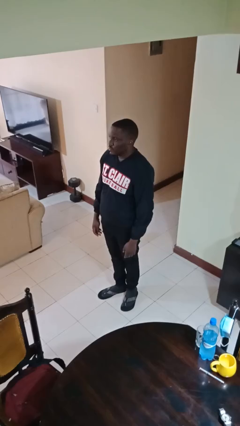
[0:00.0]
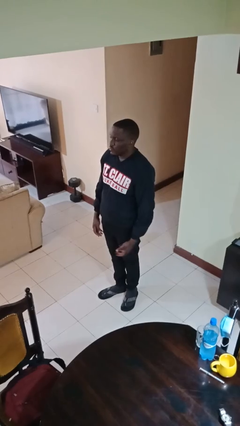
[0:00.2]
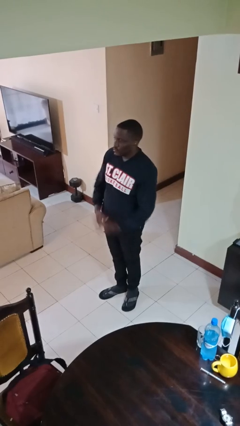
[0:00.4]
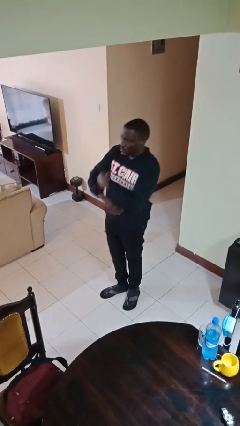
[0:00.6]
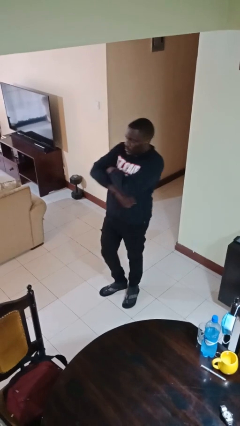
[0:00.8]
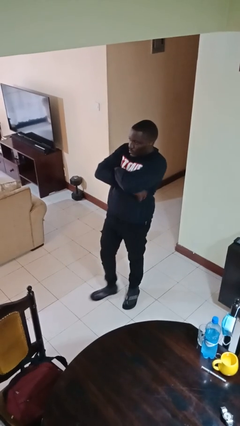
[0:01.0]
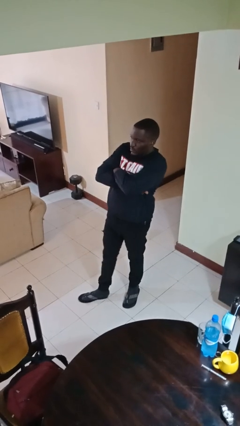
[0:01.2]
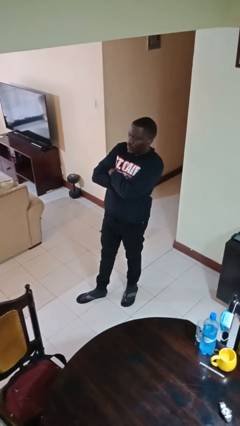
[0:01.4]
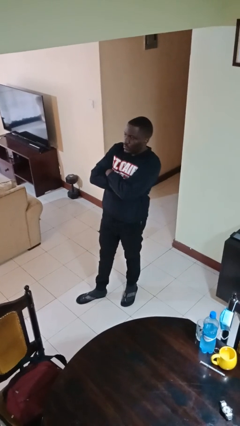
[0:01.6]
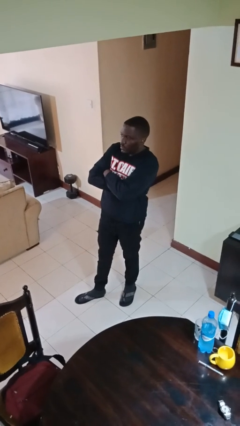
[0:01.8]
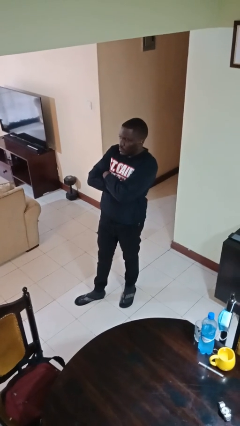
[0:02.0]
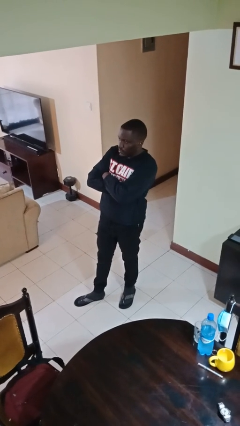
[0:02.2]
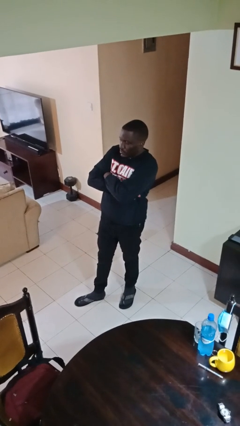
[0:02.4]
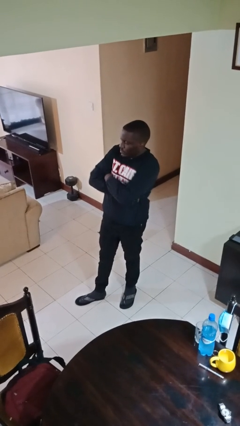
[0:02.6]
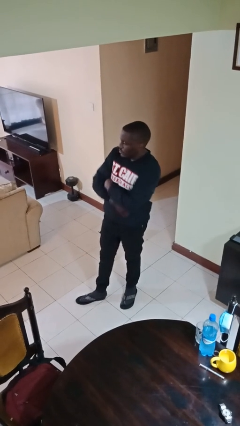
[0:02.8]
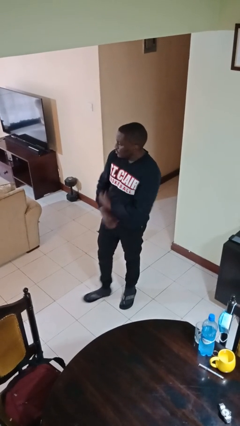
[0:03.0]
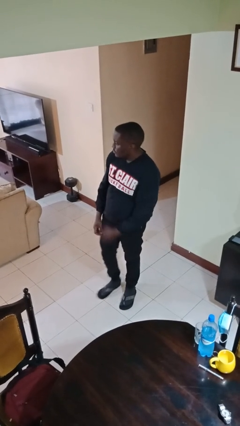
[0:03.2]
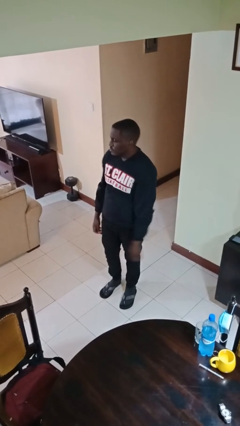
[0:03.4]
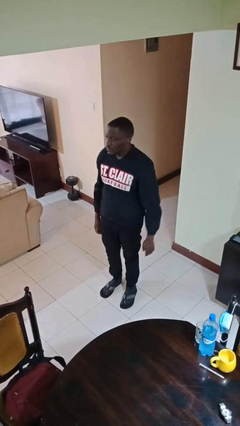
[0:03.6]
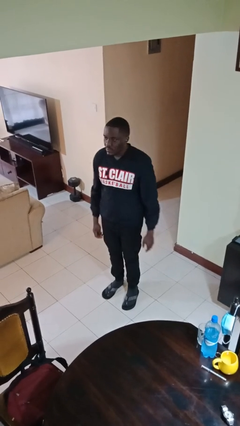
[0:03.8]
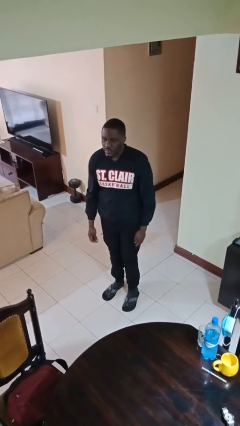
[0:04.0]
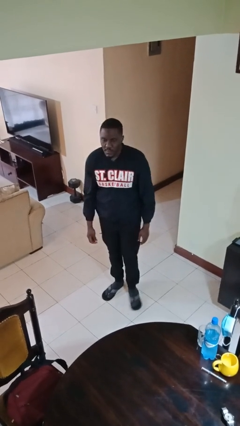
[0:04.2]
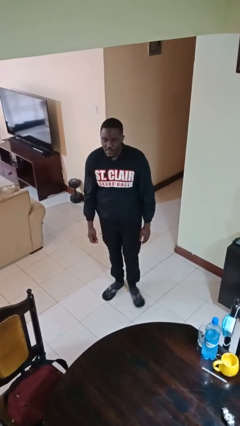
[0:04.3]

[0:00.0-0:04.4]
person crosses arms

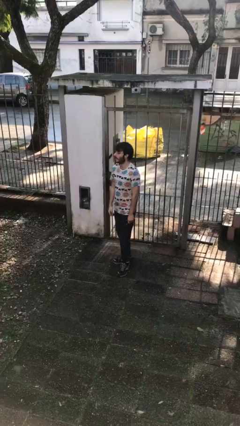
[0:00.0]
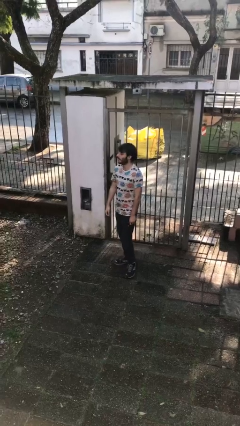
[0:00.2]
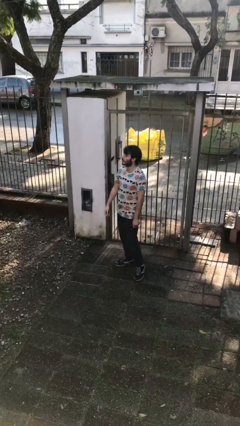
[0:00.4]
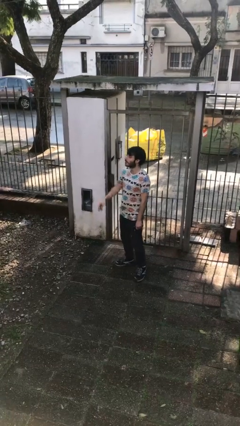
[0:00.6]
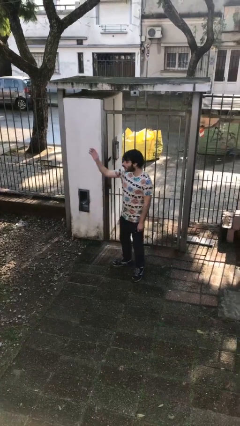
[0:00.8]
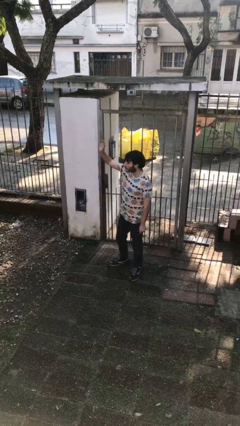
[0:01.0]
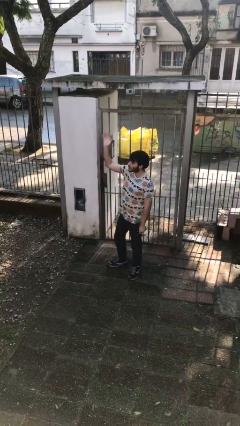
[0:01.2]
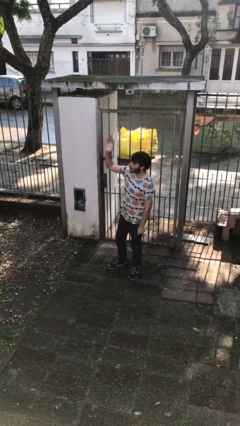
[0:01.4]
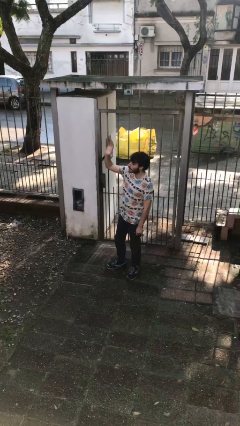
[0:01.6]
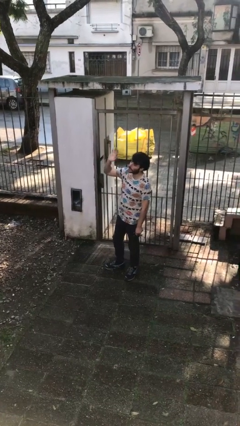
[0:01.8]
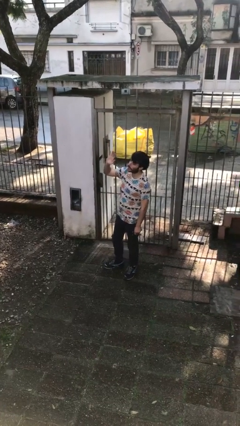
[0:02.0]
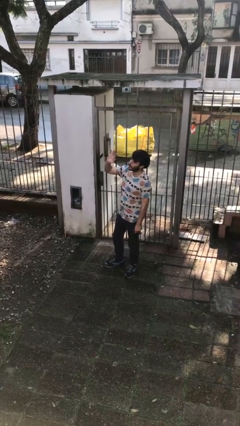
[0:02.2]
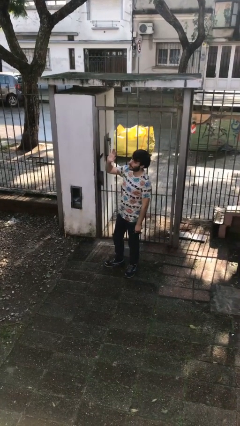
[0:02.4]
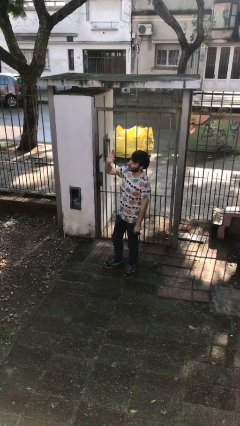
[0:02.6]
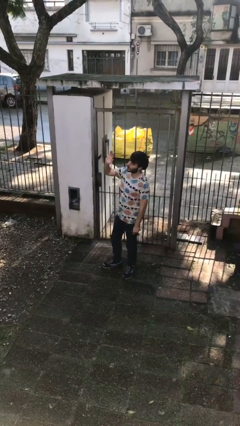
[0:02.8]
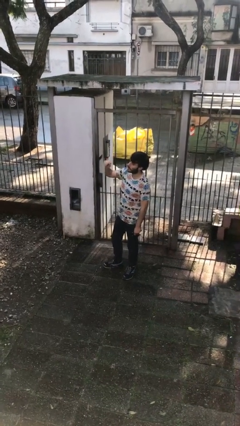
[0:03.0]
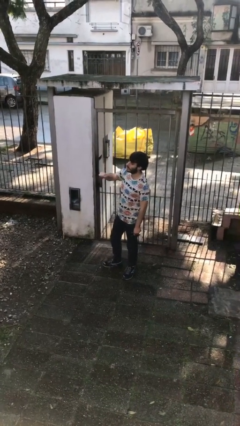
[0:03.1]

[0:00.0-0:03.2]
person waves at person

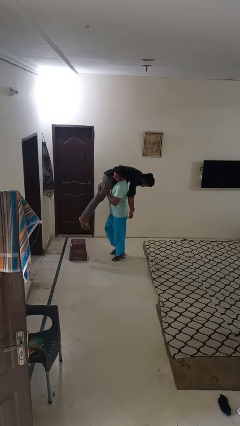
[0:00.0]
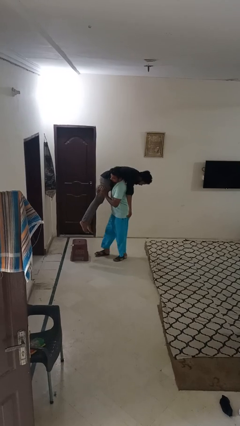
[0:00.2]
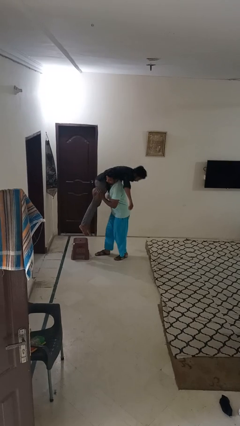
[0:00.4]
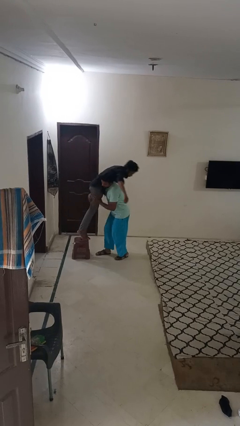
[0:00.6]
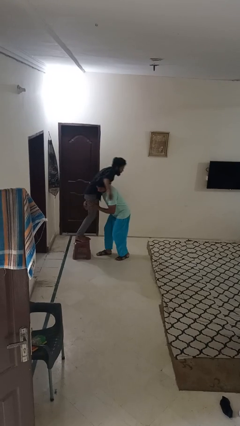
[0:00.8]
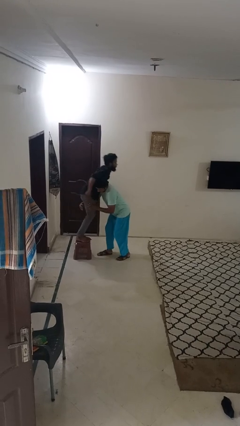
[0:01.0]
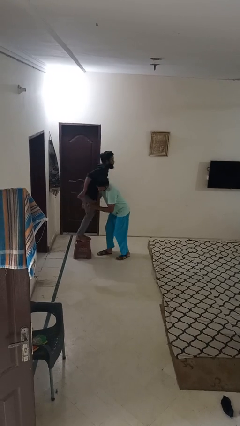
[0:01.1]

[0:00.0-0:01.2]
person puts down person

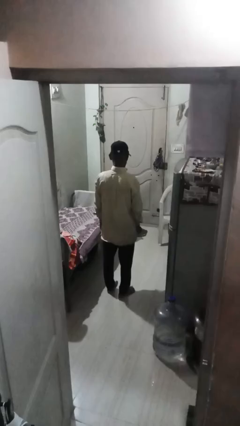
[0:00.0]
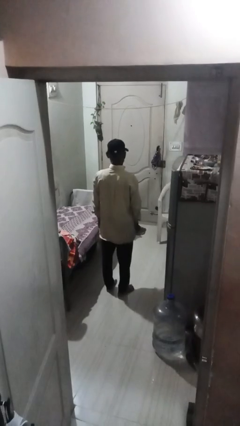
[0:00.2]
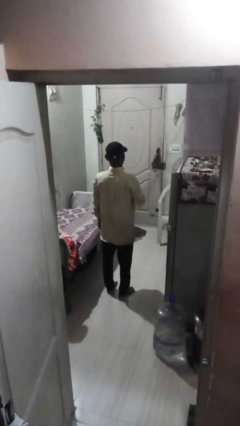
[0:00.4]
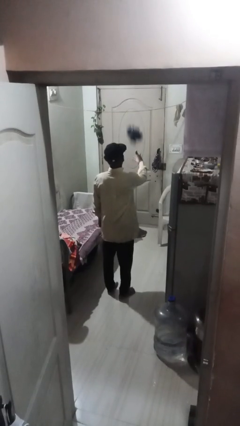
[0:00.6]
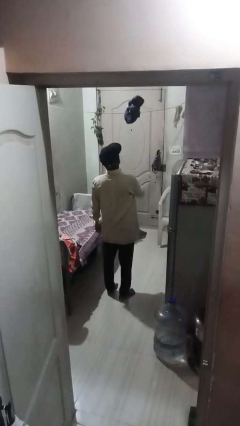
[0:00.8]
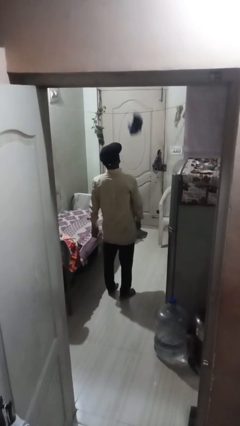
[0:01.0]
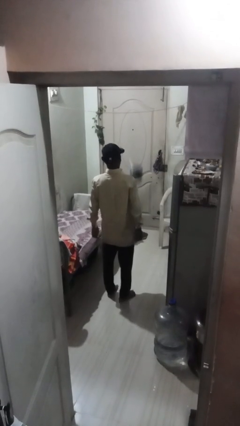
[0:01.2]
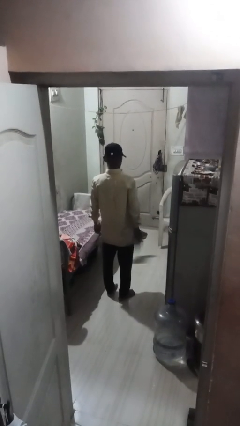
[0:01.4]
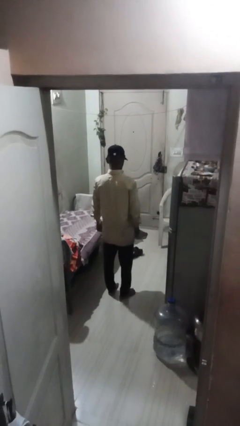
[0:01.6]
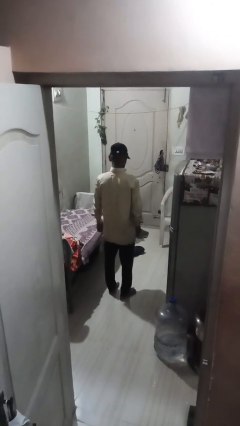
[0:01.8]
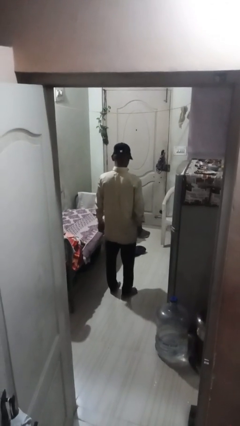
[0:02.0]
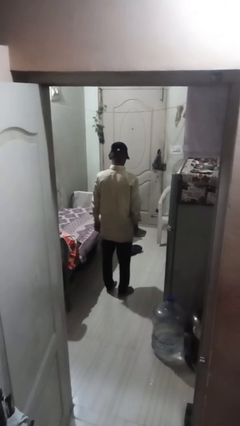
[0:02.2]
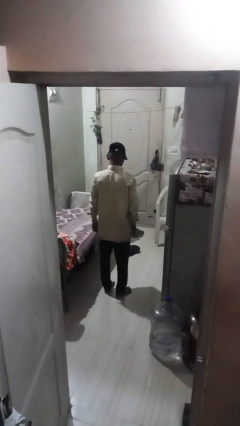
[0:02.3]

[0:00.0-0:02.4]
person throws object into air

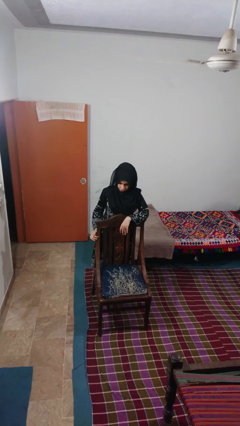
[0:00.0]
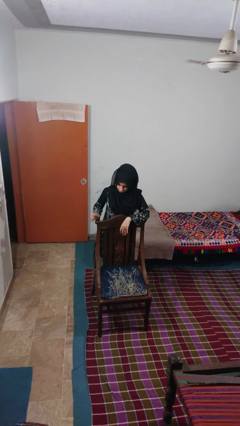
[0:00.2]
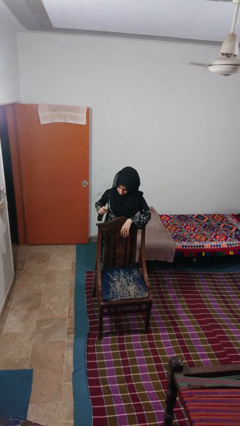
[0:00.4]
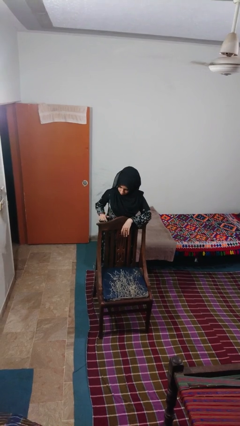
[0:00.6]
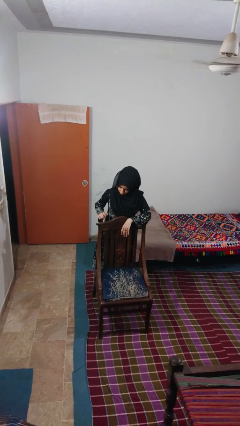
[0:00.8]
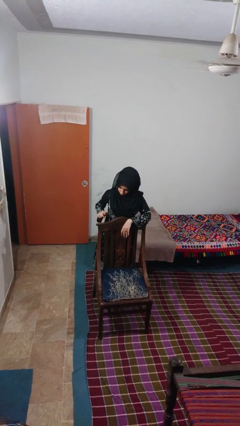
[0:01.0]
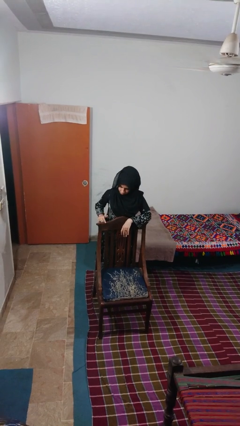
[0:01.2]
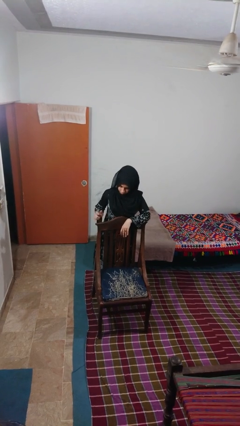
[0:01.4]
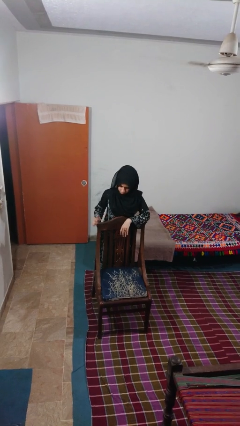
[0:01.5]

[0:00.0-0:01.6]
person taps object with finger

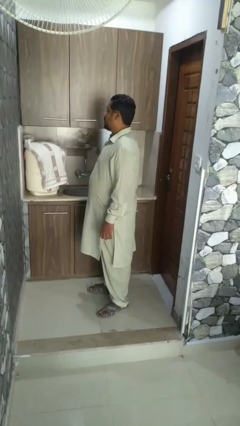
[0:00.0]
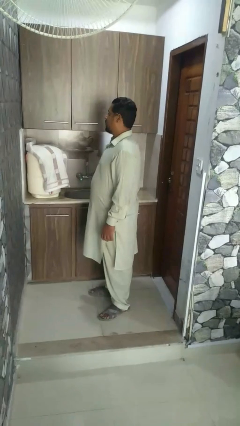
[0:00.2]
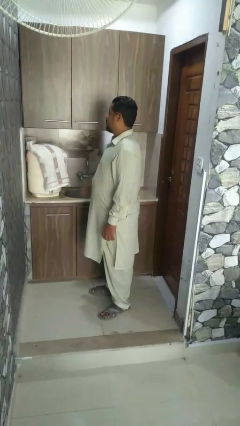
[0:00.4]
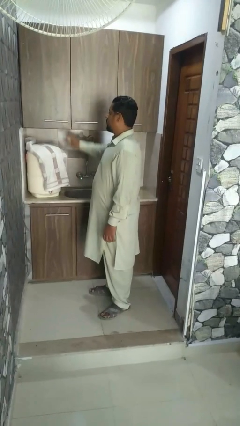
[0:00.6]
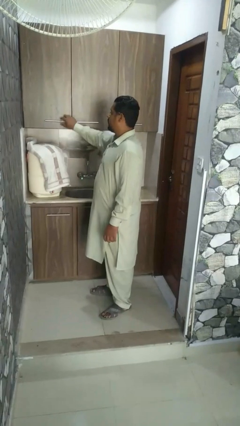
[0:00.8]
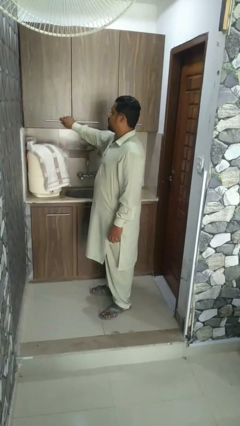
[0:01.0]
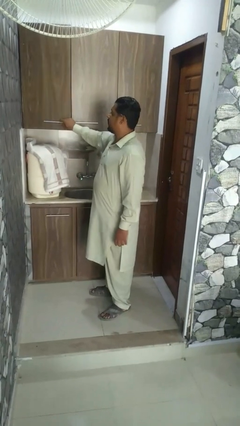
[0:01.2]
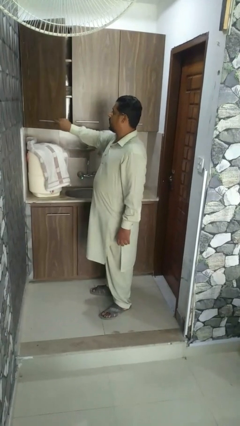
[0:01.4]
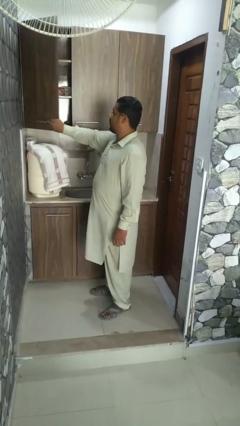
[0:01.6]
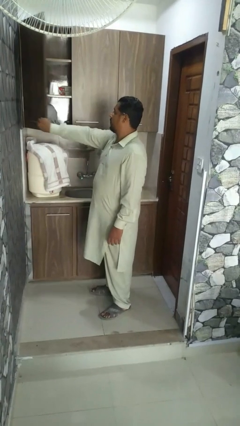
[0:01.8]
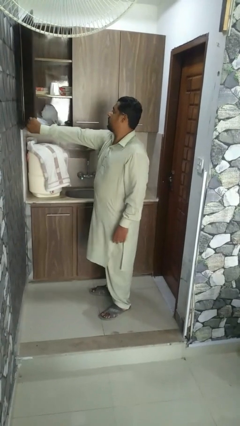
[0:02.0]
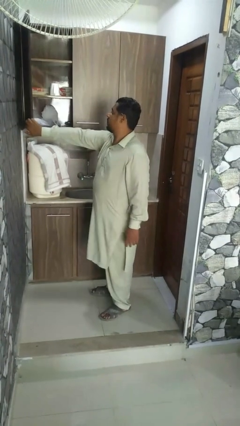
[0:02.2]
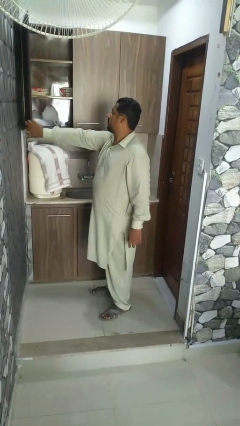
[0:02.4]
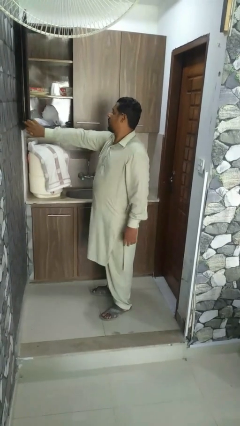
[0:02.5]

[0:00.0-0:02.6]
person opens microwave

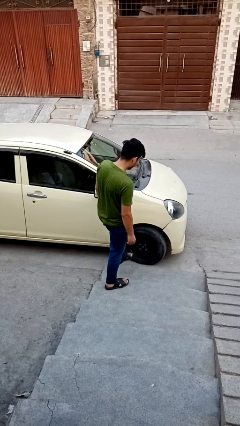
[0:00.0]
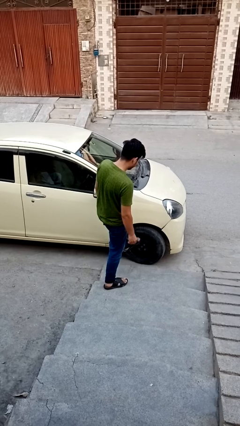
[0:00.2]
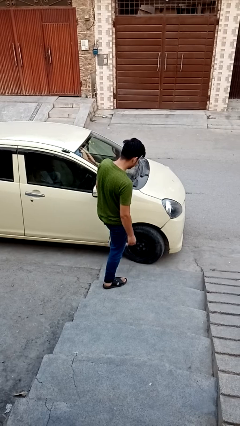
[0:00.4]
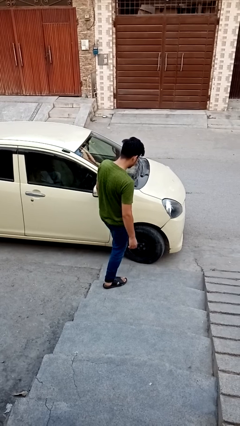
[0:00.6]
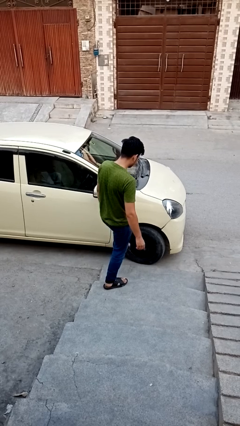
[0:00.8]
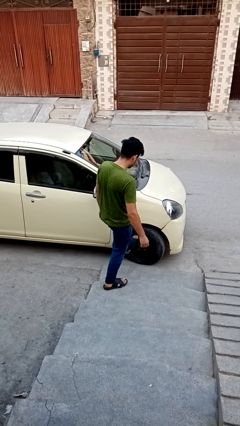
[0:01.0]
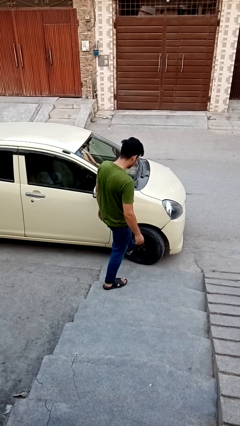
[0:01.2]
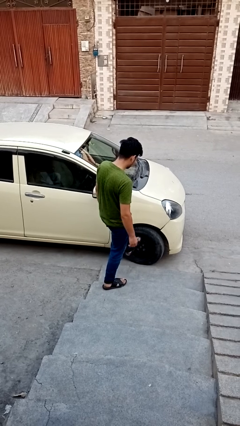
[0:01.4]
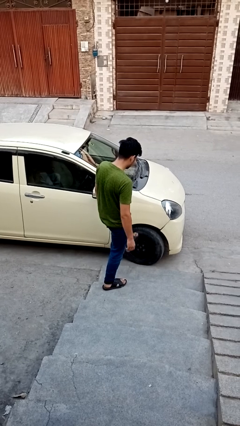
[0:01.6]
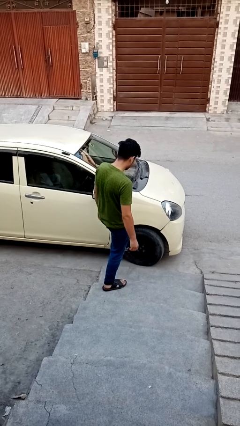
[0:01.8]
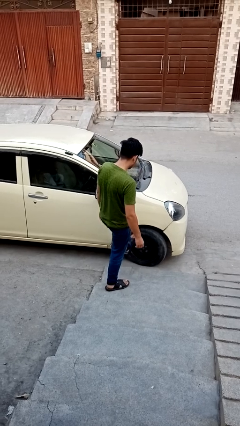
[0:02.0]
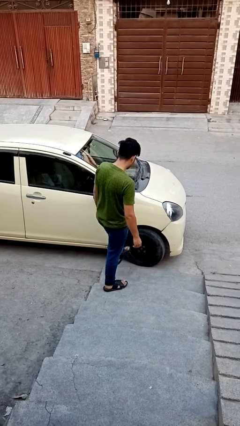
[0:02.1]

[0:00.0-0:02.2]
person kicks car tires
